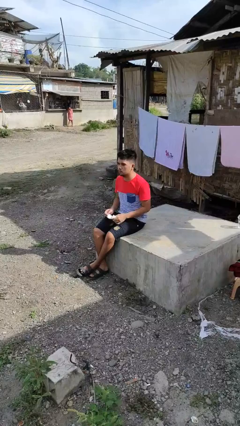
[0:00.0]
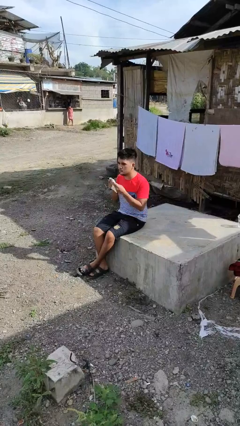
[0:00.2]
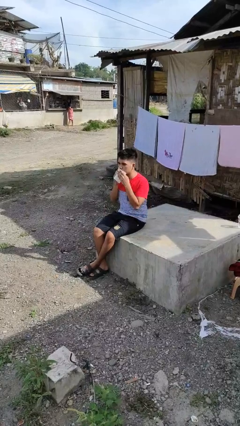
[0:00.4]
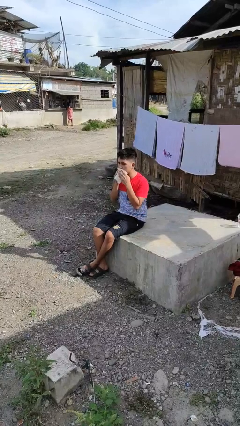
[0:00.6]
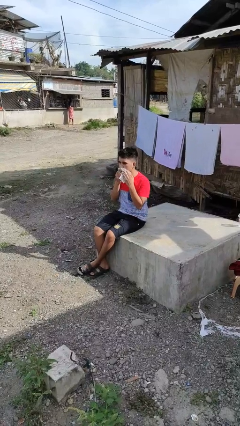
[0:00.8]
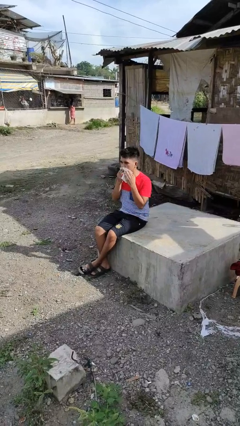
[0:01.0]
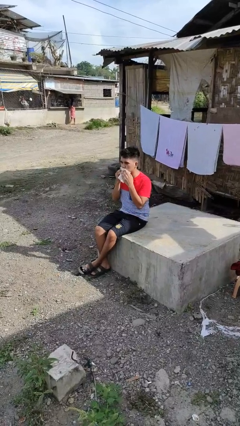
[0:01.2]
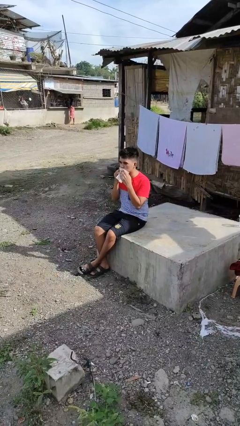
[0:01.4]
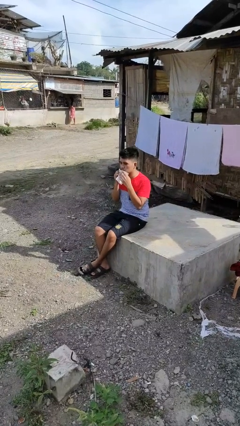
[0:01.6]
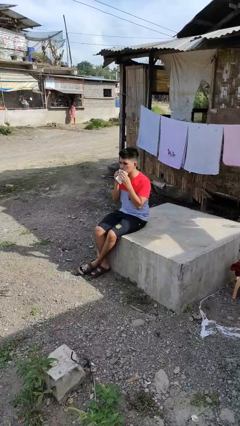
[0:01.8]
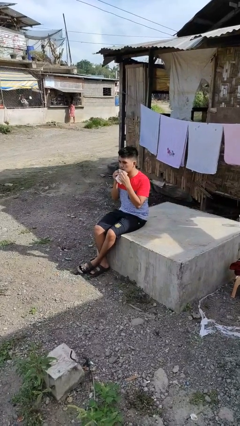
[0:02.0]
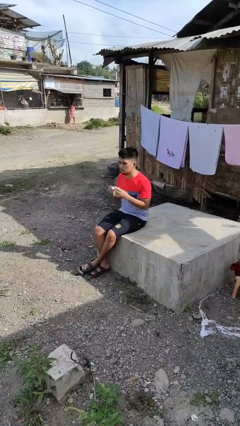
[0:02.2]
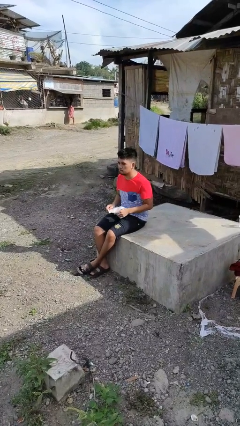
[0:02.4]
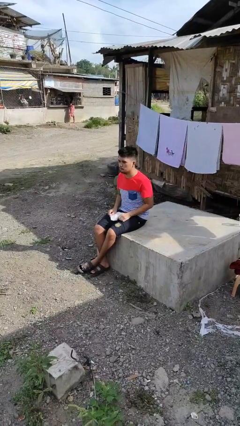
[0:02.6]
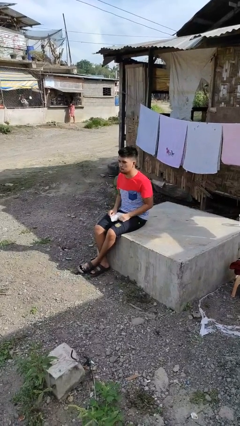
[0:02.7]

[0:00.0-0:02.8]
person wipes mouth with napkin

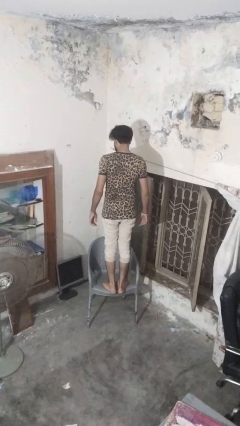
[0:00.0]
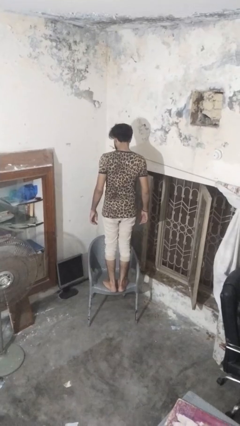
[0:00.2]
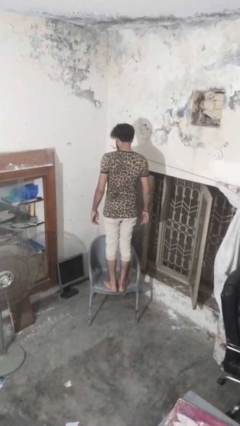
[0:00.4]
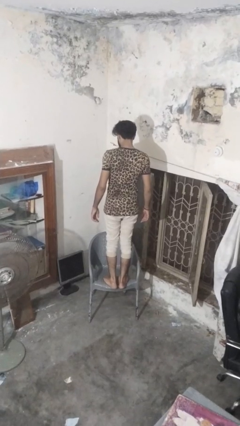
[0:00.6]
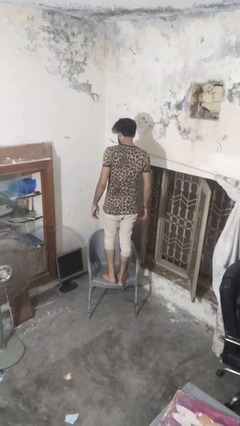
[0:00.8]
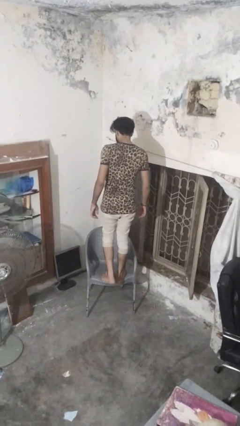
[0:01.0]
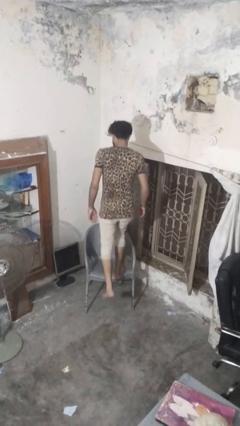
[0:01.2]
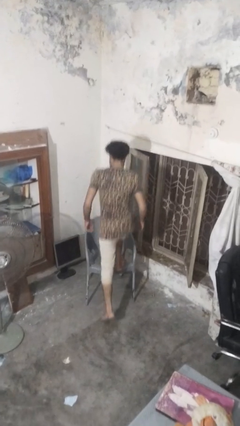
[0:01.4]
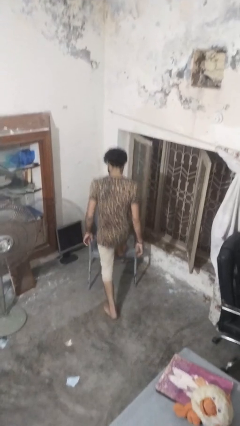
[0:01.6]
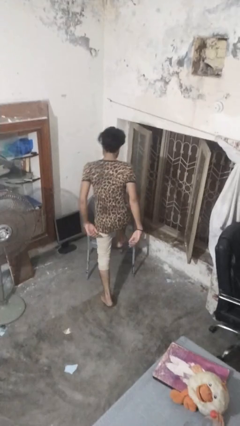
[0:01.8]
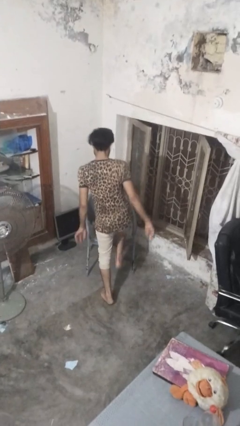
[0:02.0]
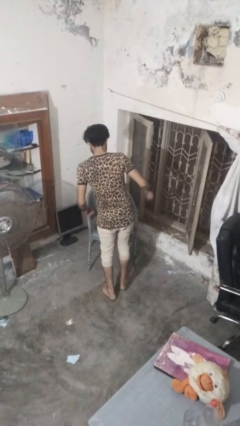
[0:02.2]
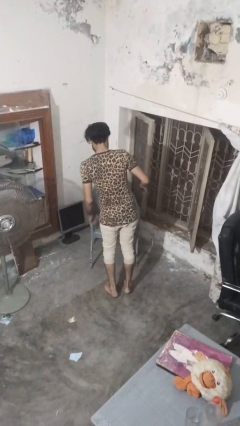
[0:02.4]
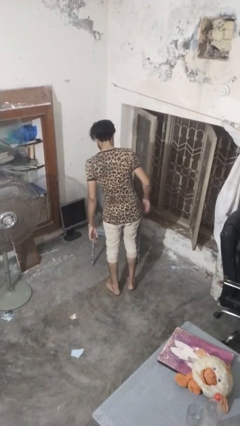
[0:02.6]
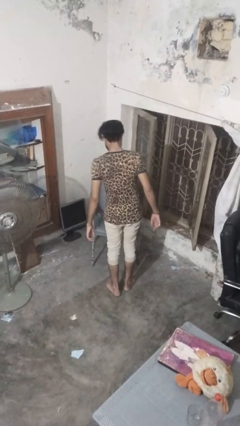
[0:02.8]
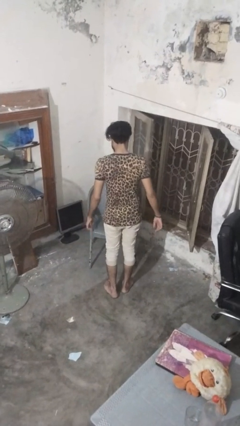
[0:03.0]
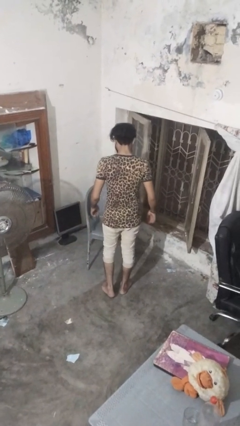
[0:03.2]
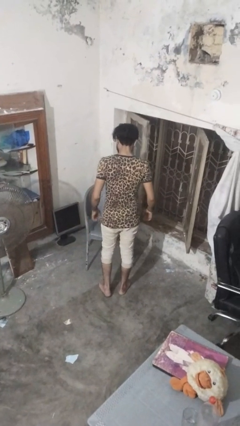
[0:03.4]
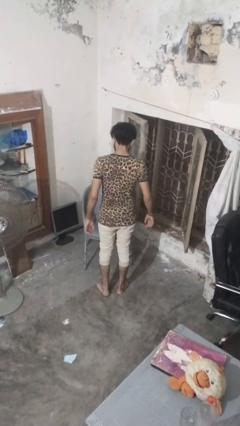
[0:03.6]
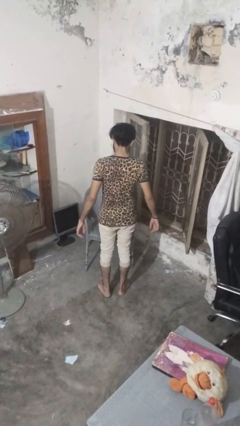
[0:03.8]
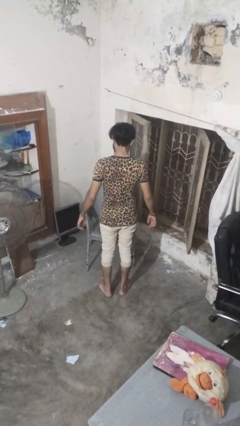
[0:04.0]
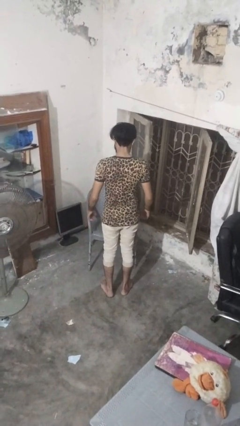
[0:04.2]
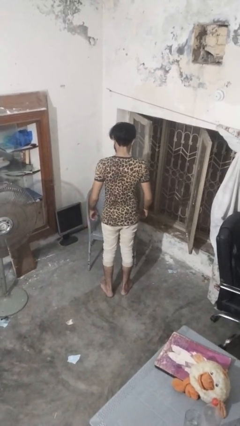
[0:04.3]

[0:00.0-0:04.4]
person climbs off chair

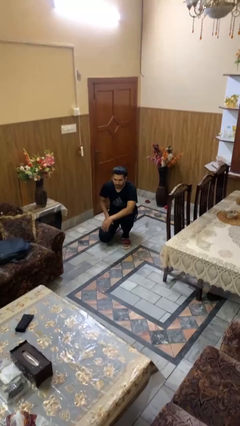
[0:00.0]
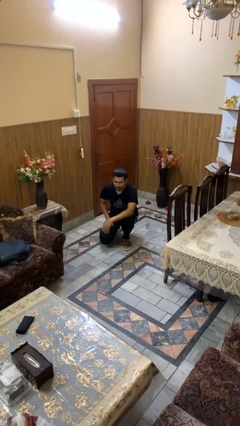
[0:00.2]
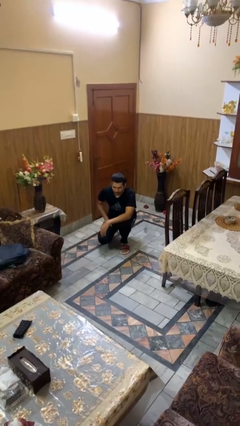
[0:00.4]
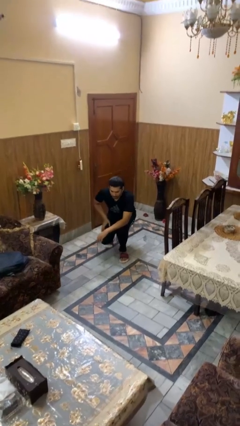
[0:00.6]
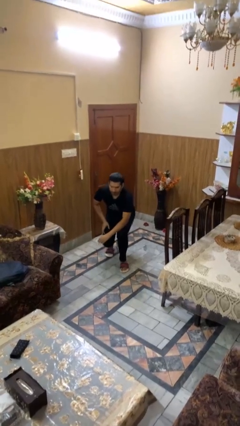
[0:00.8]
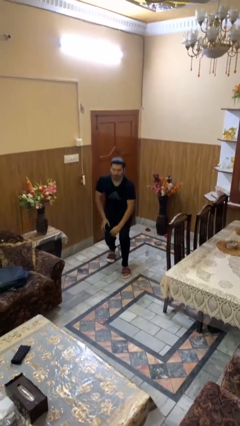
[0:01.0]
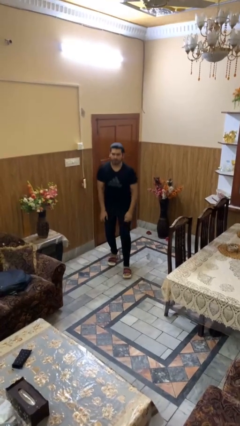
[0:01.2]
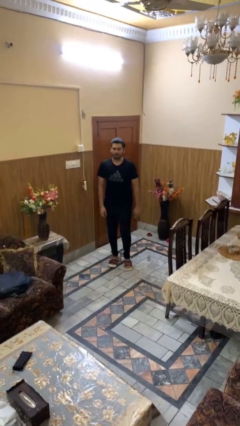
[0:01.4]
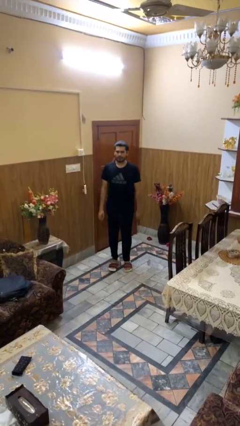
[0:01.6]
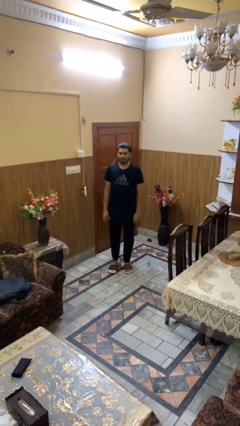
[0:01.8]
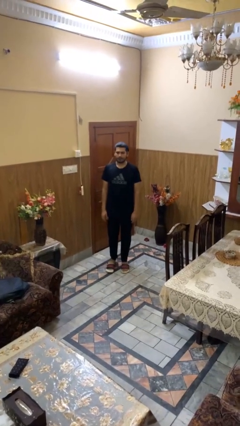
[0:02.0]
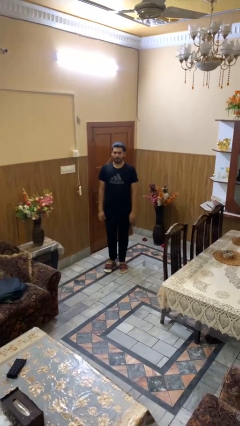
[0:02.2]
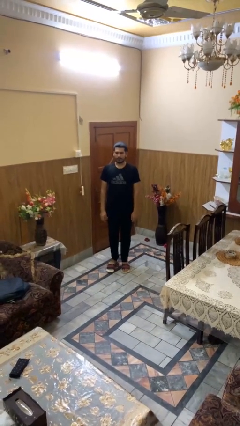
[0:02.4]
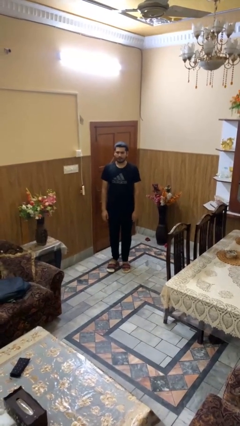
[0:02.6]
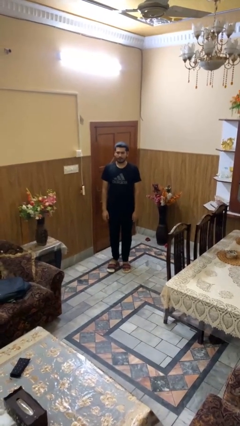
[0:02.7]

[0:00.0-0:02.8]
person stands up from floor

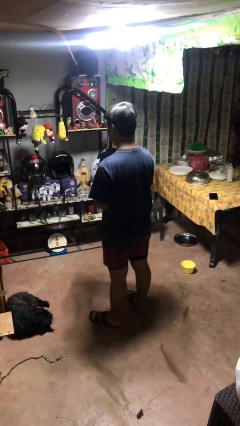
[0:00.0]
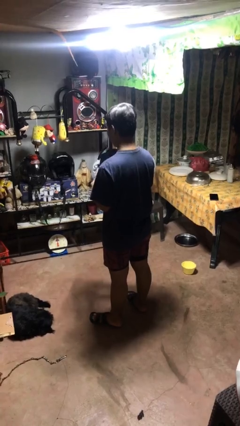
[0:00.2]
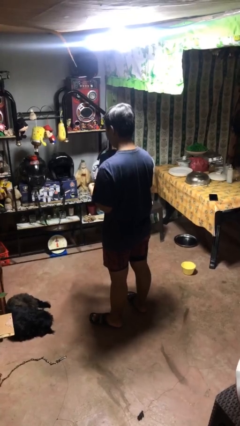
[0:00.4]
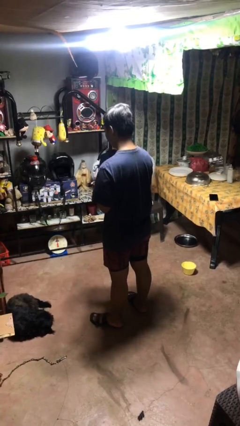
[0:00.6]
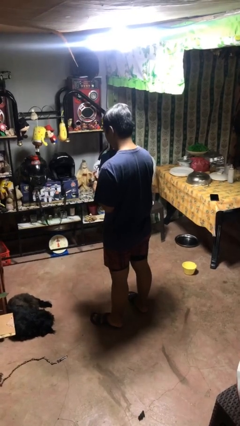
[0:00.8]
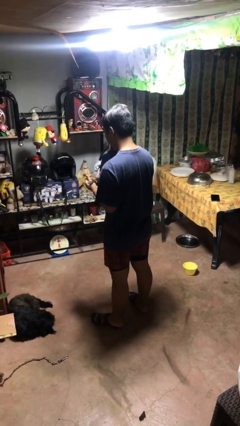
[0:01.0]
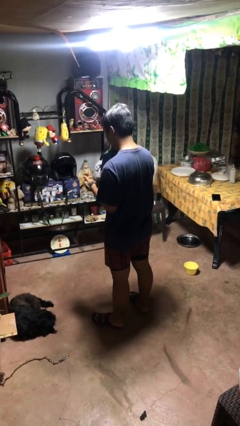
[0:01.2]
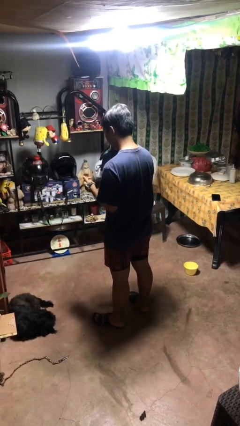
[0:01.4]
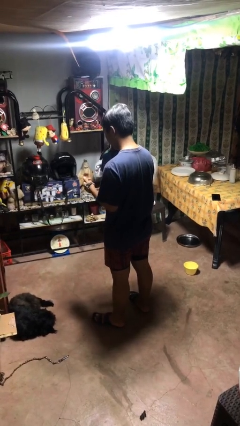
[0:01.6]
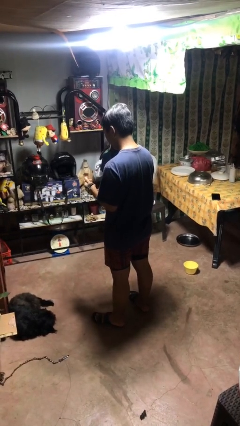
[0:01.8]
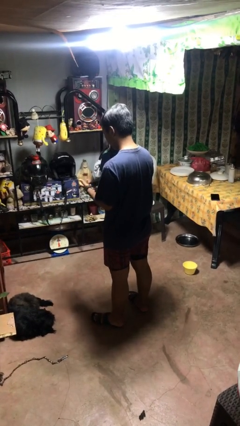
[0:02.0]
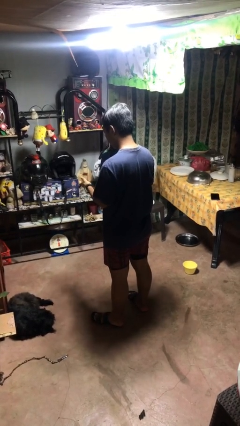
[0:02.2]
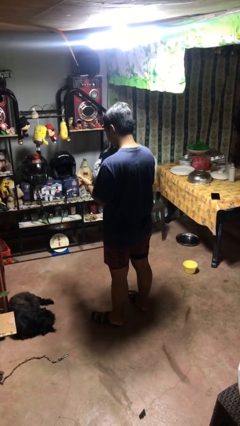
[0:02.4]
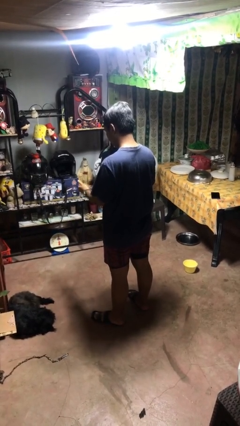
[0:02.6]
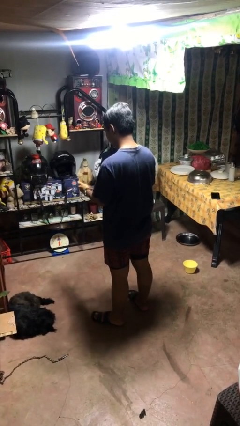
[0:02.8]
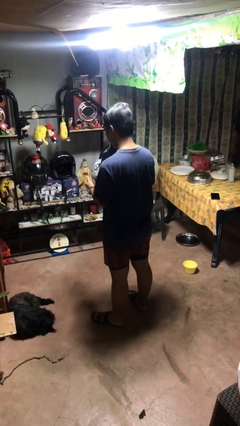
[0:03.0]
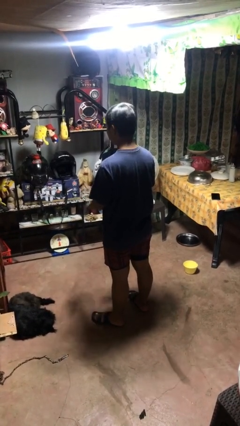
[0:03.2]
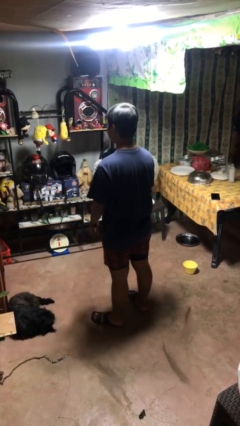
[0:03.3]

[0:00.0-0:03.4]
person puts on wristwatch

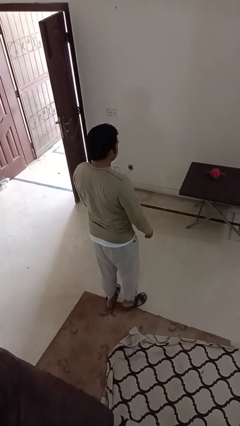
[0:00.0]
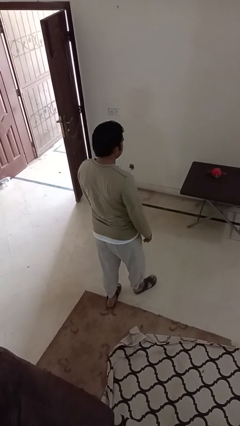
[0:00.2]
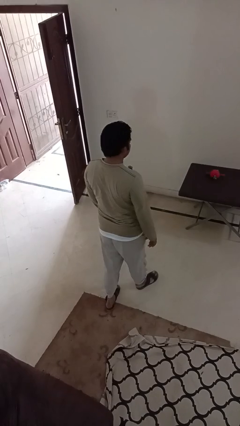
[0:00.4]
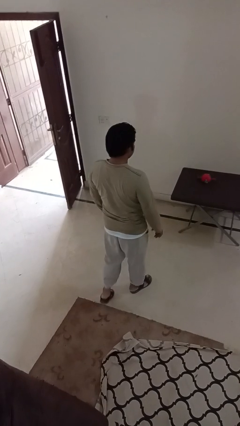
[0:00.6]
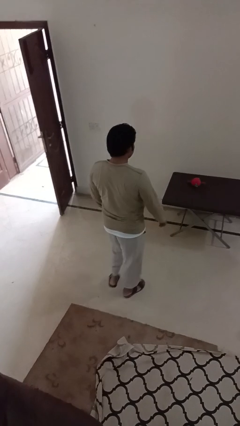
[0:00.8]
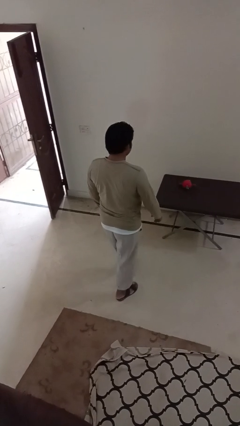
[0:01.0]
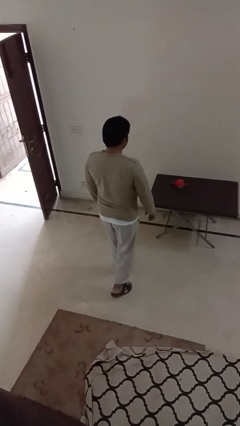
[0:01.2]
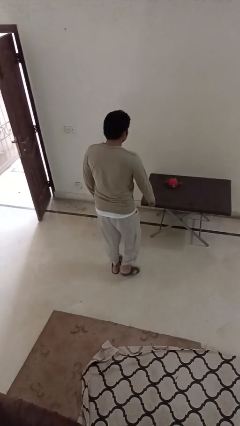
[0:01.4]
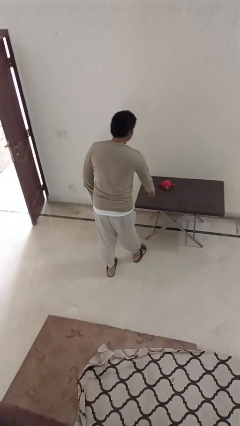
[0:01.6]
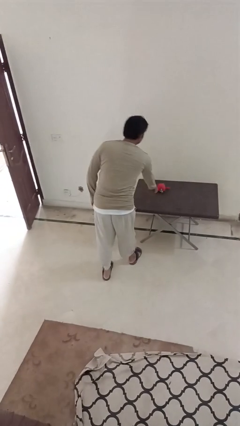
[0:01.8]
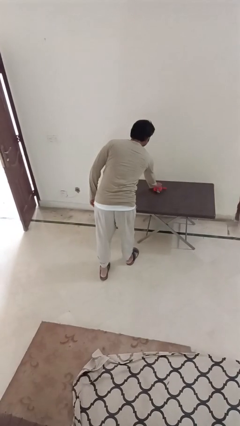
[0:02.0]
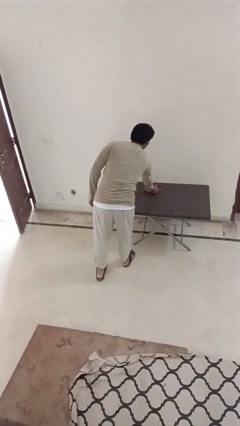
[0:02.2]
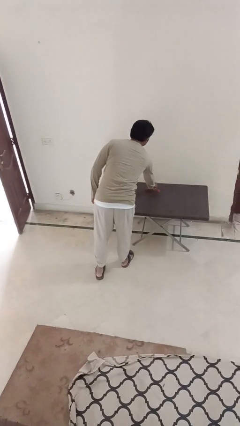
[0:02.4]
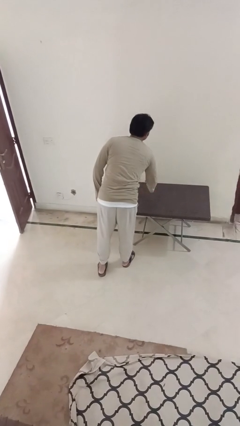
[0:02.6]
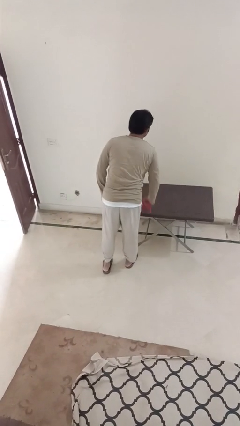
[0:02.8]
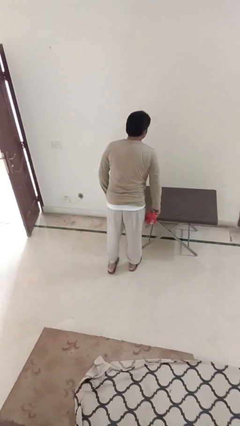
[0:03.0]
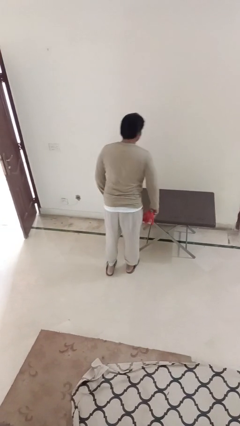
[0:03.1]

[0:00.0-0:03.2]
person picks up object from table

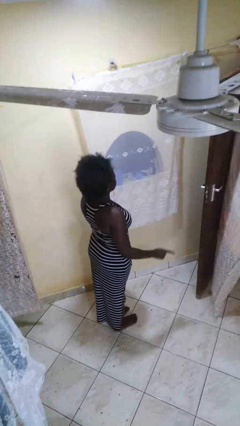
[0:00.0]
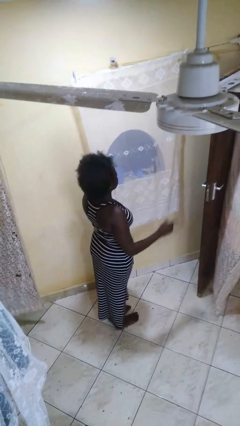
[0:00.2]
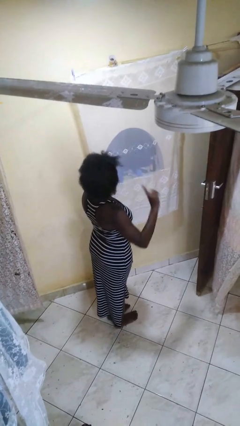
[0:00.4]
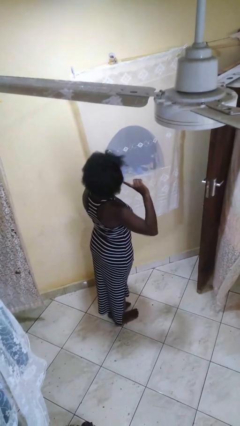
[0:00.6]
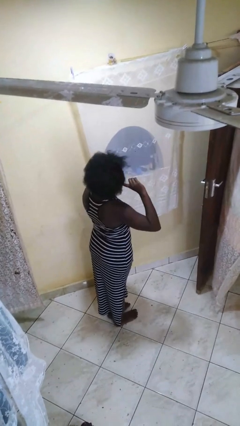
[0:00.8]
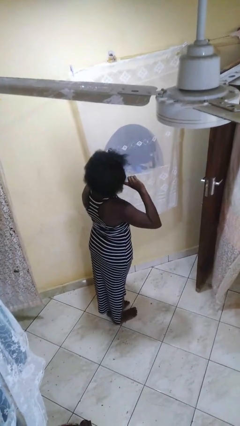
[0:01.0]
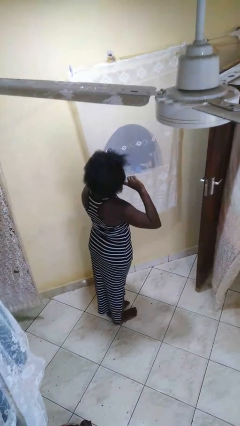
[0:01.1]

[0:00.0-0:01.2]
person gestures listen closely
